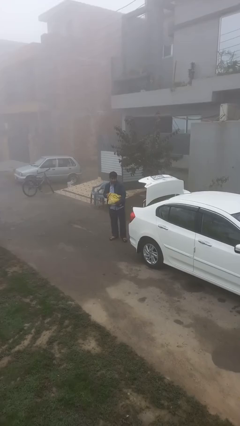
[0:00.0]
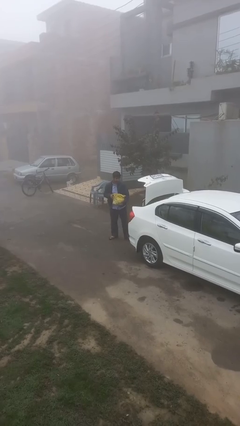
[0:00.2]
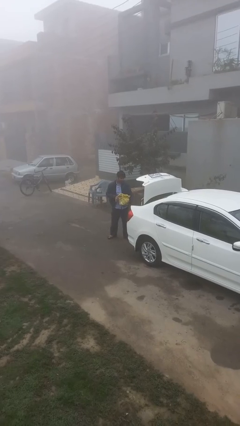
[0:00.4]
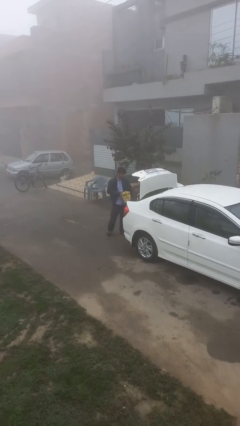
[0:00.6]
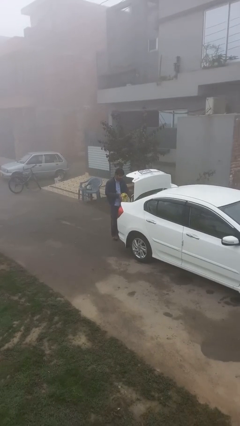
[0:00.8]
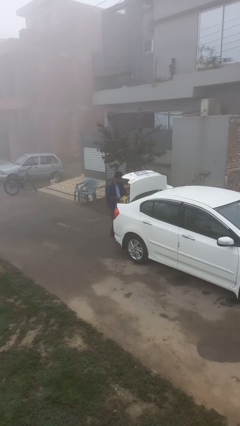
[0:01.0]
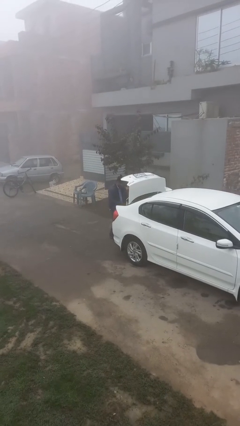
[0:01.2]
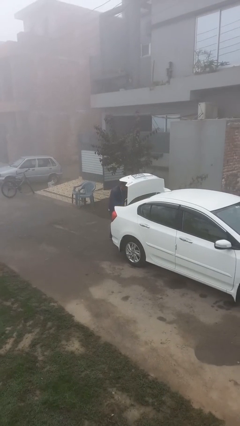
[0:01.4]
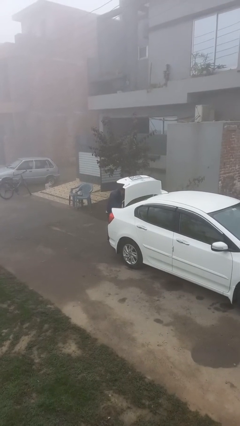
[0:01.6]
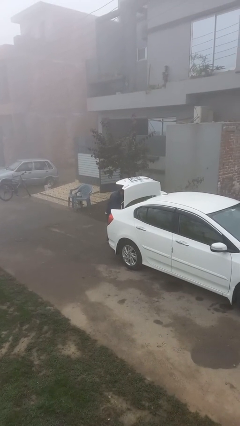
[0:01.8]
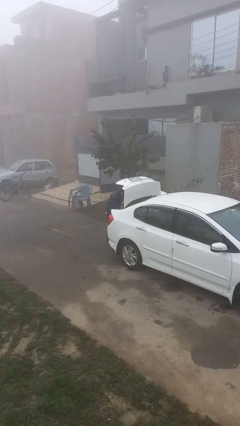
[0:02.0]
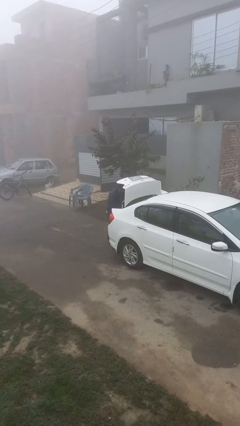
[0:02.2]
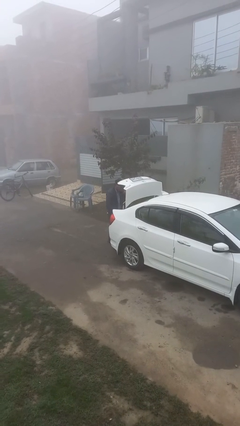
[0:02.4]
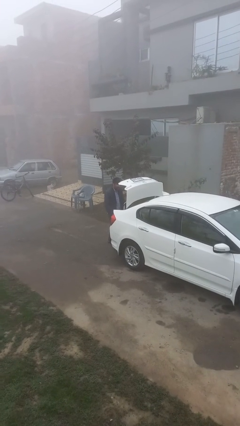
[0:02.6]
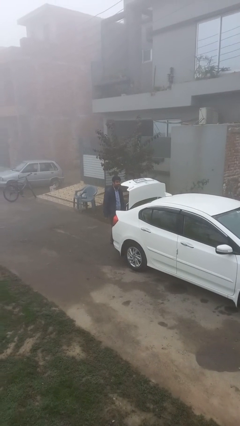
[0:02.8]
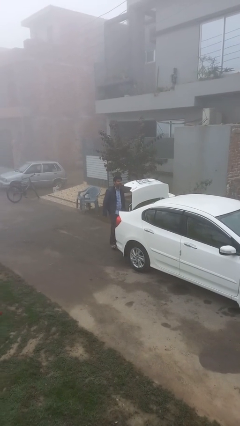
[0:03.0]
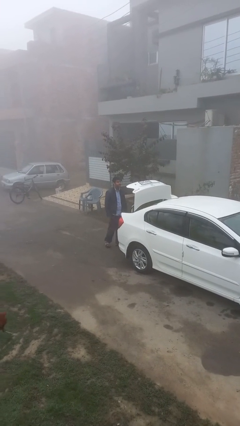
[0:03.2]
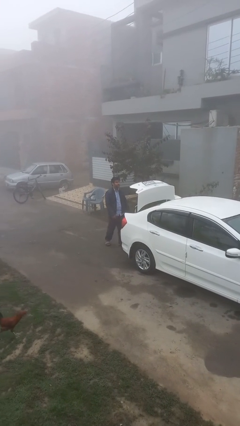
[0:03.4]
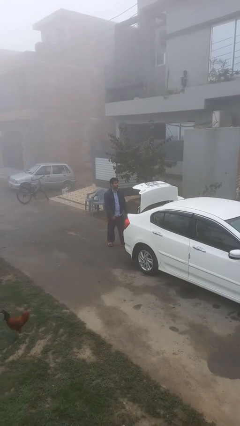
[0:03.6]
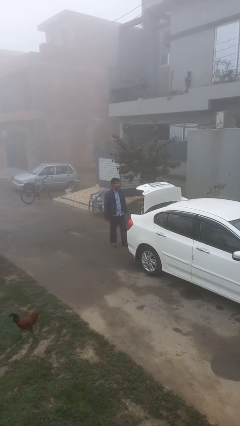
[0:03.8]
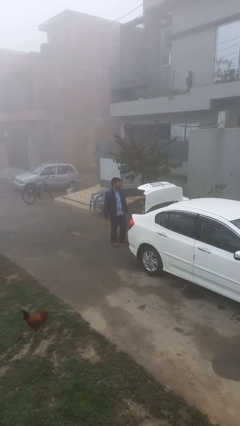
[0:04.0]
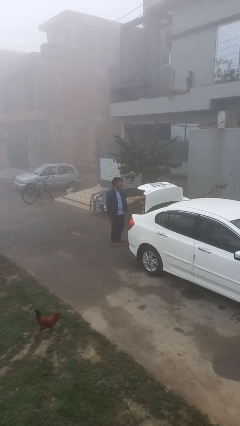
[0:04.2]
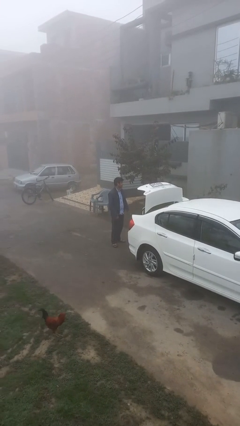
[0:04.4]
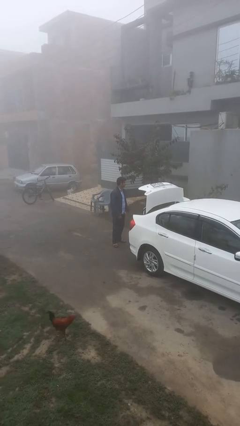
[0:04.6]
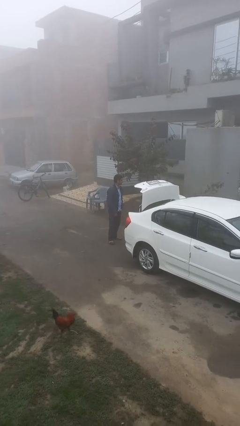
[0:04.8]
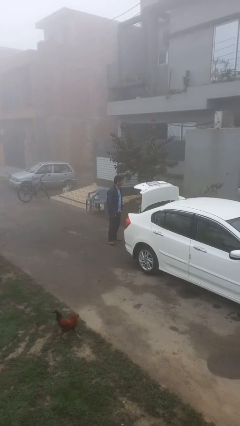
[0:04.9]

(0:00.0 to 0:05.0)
person loads car

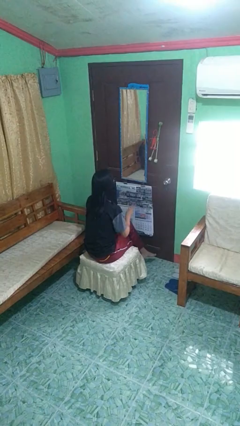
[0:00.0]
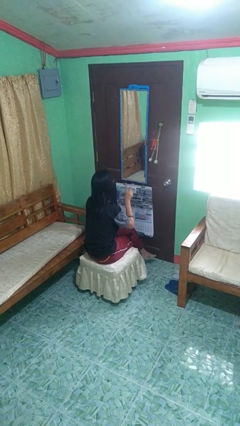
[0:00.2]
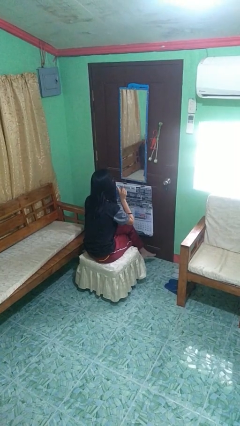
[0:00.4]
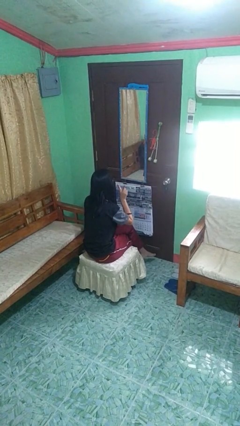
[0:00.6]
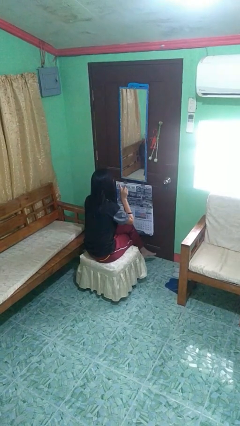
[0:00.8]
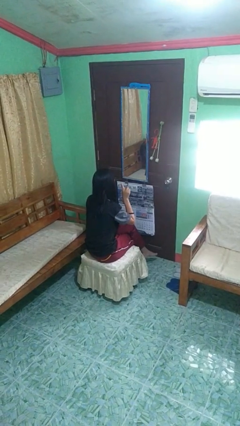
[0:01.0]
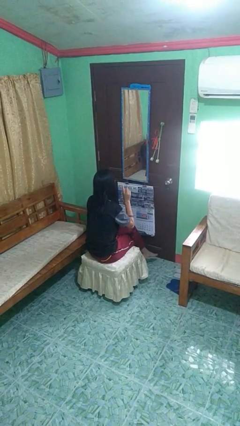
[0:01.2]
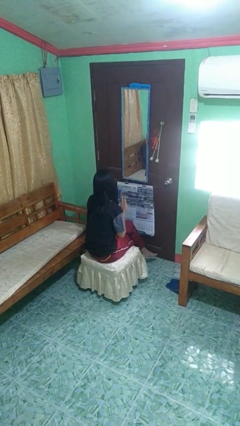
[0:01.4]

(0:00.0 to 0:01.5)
person gestures peace

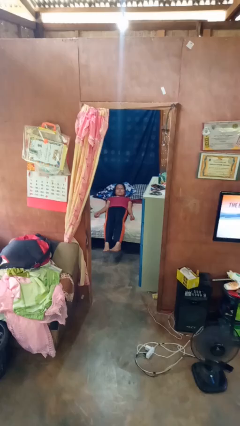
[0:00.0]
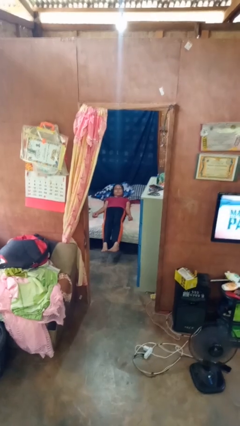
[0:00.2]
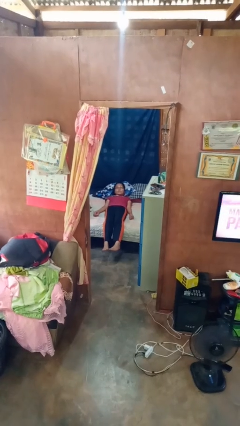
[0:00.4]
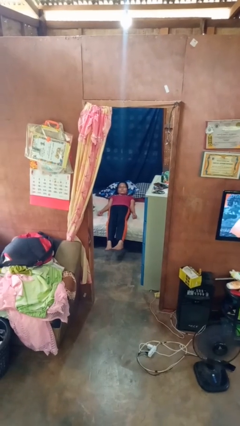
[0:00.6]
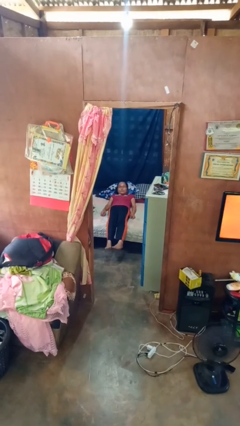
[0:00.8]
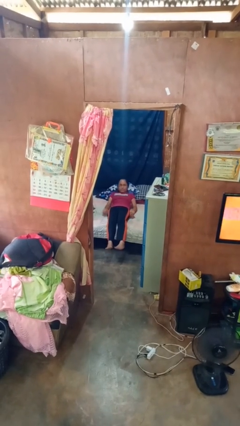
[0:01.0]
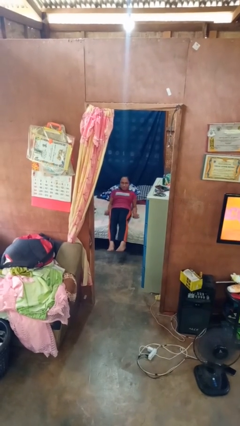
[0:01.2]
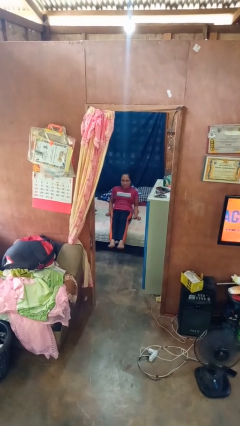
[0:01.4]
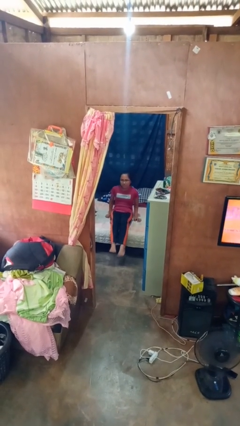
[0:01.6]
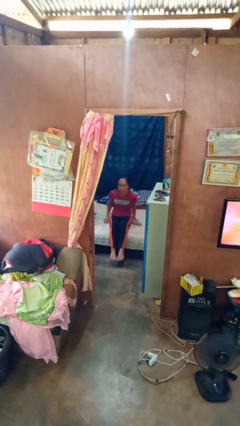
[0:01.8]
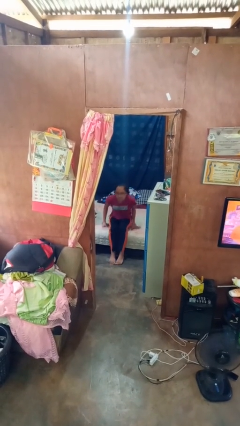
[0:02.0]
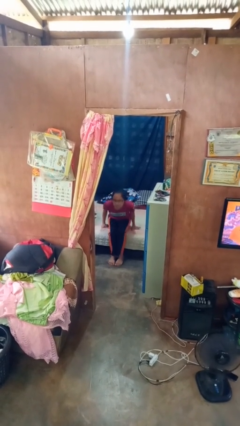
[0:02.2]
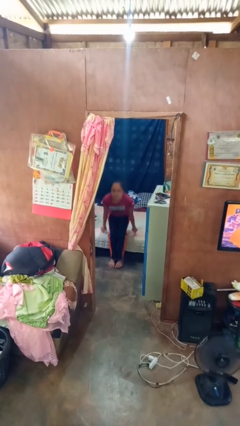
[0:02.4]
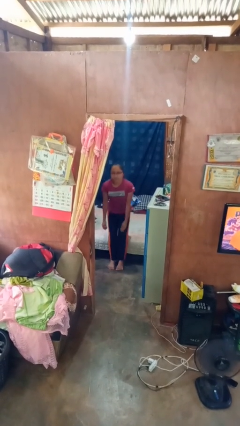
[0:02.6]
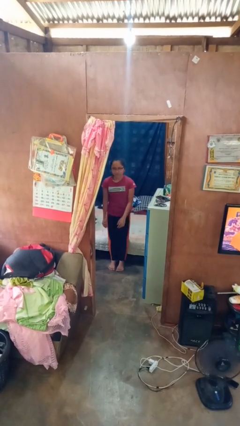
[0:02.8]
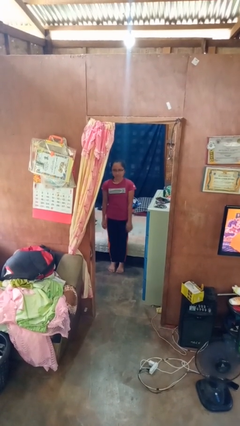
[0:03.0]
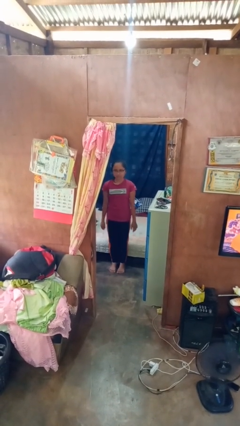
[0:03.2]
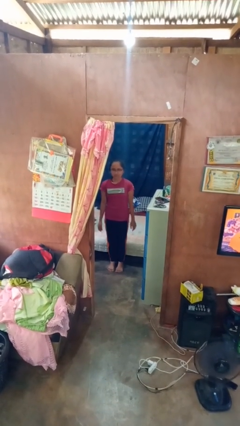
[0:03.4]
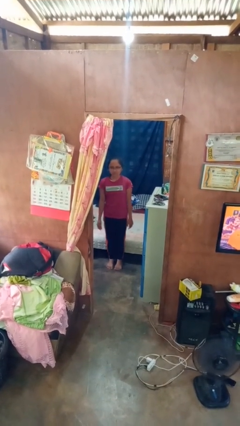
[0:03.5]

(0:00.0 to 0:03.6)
person stands up

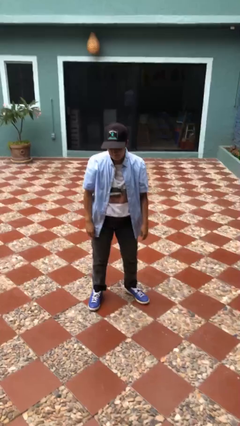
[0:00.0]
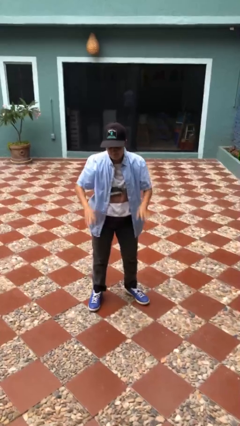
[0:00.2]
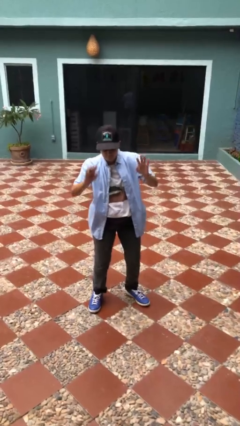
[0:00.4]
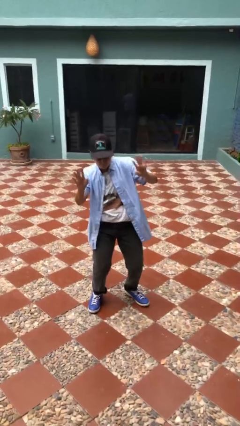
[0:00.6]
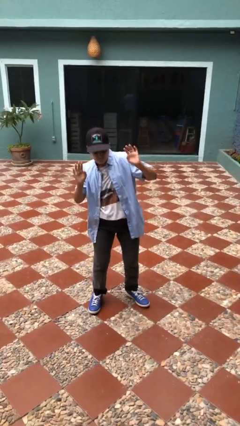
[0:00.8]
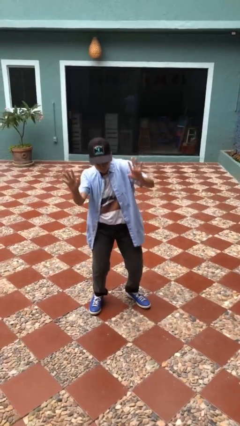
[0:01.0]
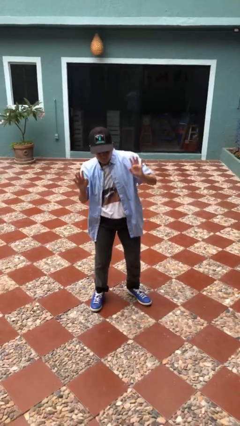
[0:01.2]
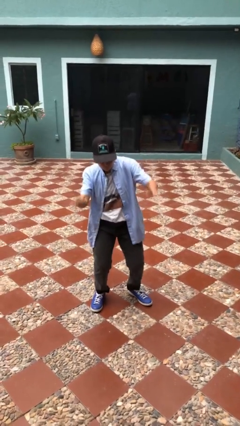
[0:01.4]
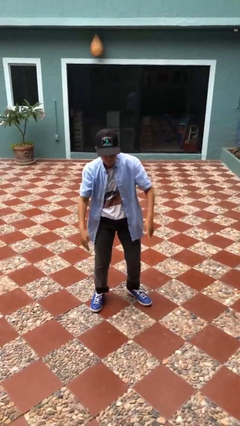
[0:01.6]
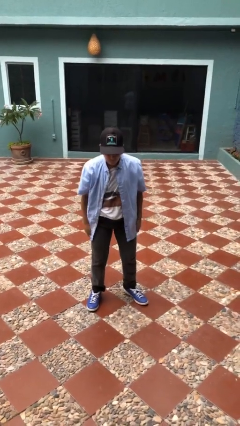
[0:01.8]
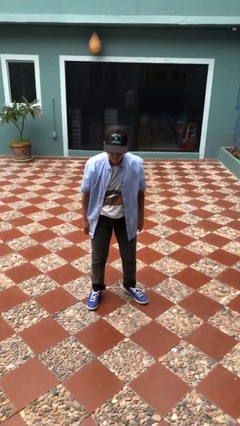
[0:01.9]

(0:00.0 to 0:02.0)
person dances in place

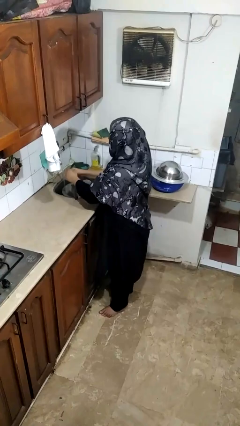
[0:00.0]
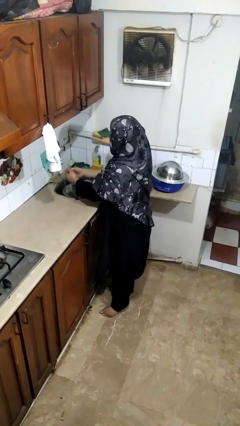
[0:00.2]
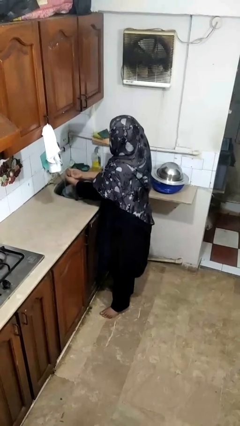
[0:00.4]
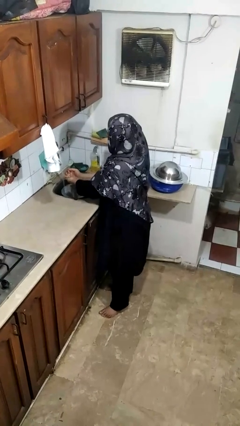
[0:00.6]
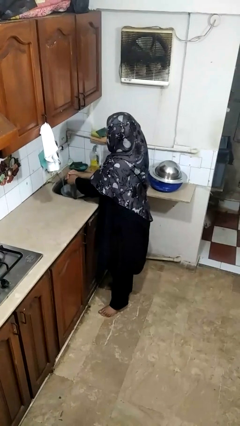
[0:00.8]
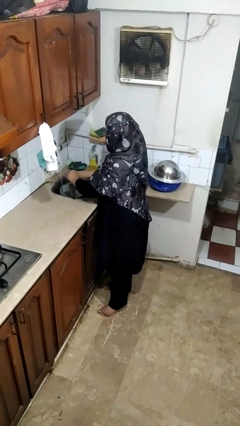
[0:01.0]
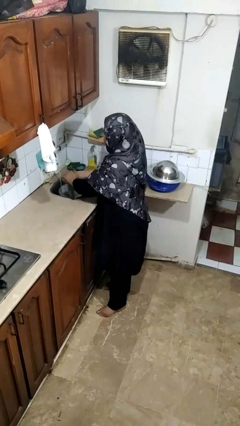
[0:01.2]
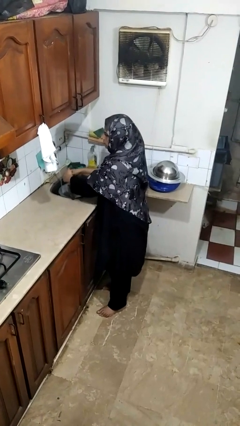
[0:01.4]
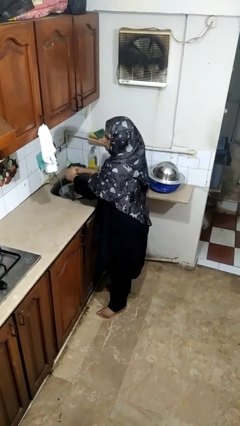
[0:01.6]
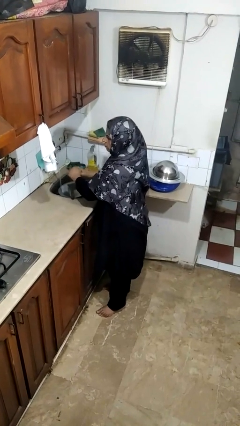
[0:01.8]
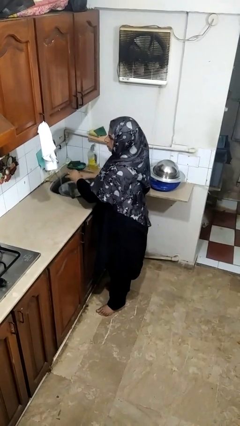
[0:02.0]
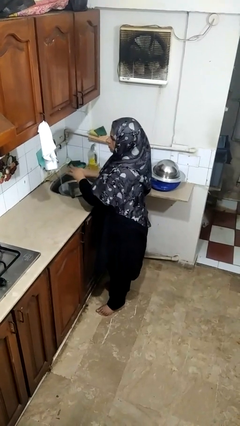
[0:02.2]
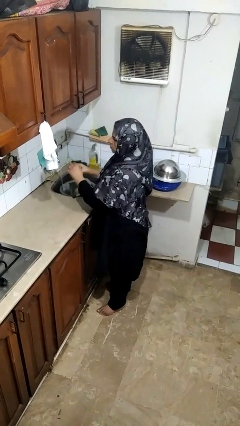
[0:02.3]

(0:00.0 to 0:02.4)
person washes hands

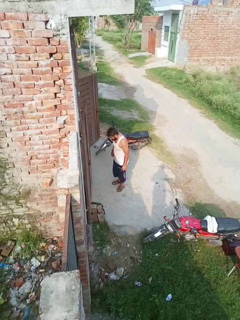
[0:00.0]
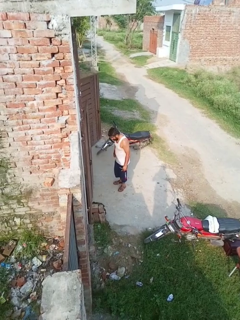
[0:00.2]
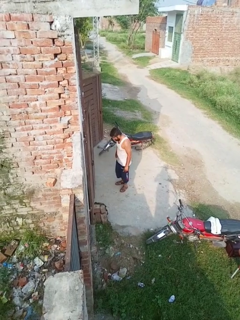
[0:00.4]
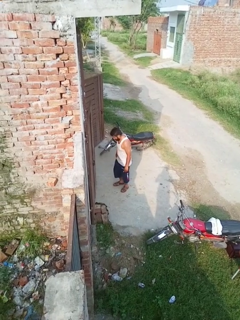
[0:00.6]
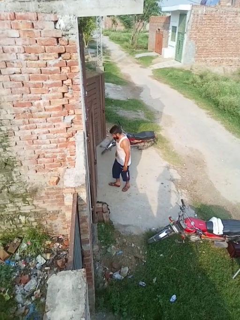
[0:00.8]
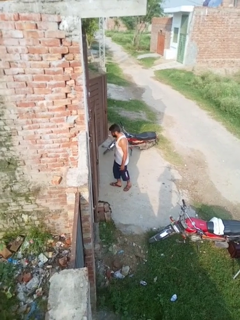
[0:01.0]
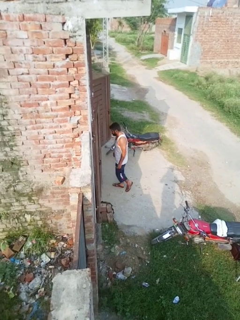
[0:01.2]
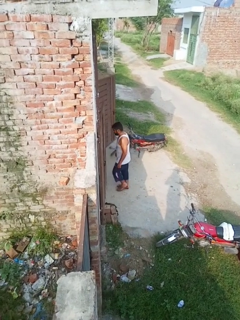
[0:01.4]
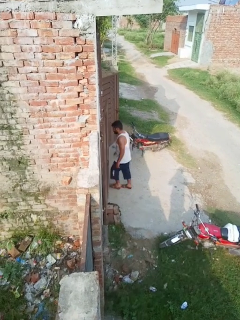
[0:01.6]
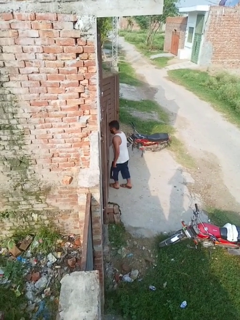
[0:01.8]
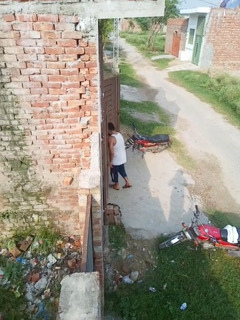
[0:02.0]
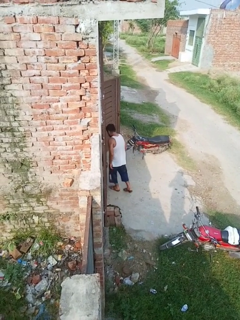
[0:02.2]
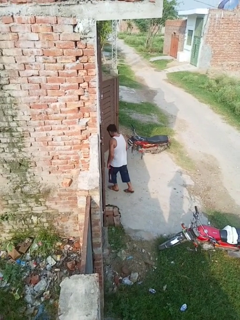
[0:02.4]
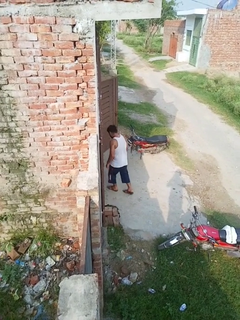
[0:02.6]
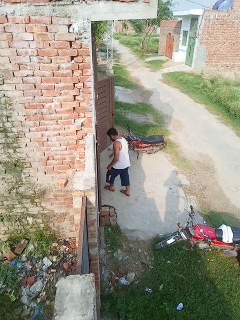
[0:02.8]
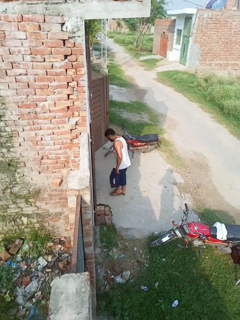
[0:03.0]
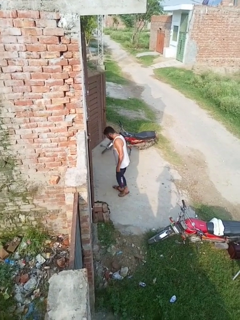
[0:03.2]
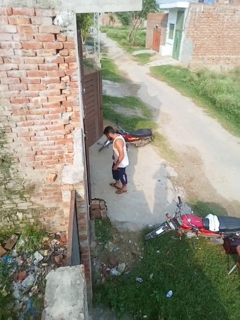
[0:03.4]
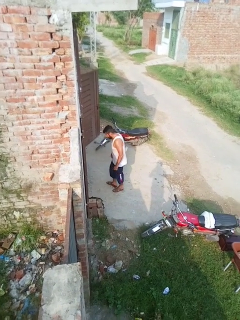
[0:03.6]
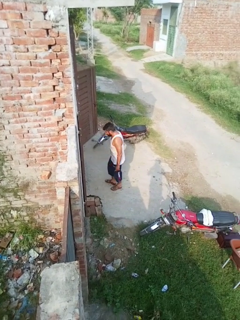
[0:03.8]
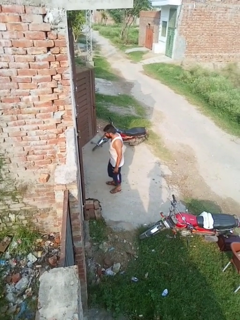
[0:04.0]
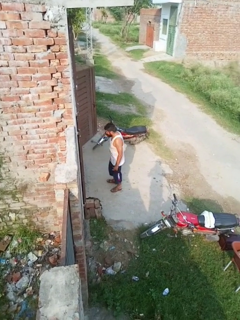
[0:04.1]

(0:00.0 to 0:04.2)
person bumps into wall
